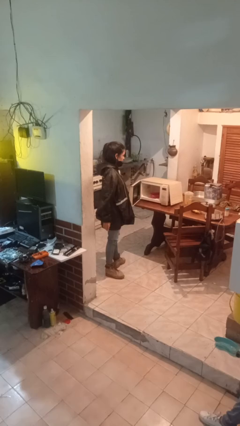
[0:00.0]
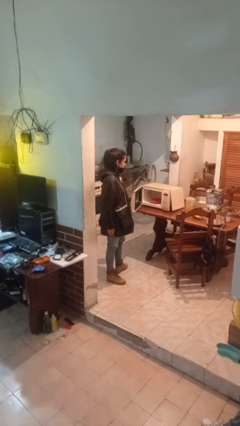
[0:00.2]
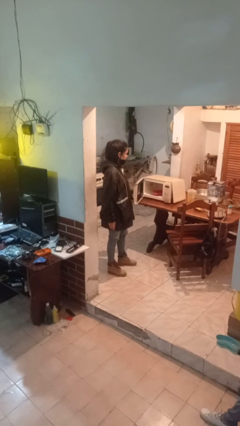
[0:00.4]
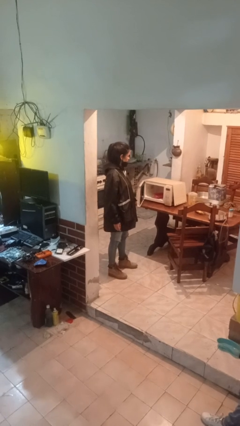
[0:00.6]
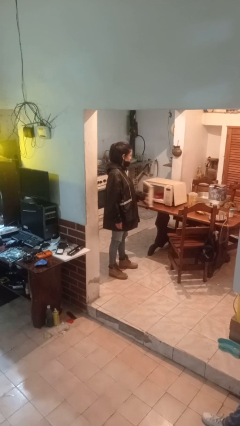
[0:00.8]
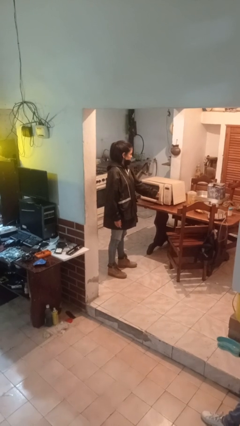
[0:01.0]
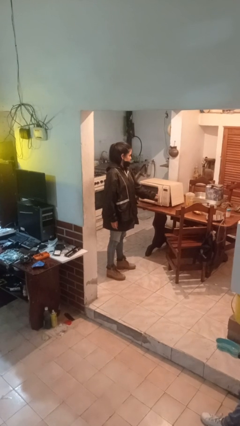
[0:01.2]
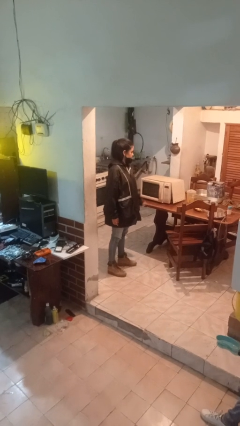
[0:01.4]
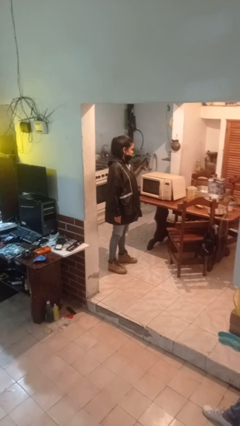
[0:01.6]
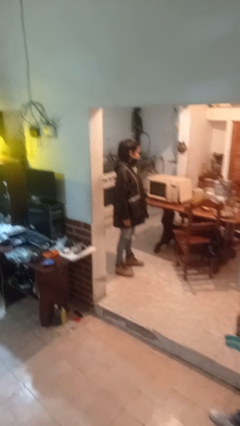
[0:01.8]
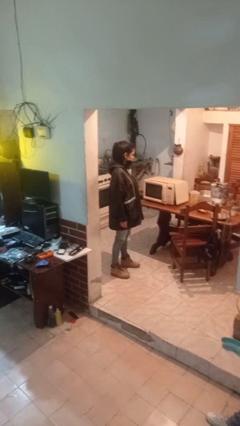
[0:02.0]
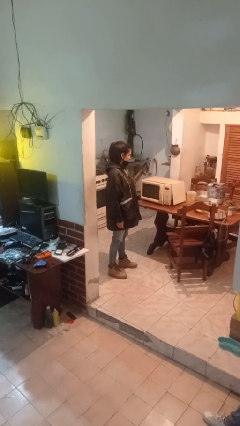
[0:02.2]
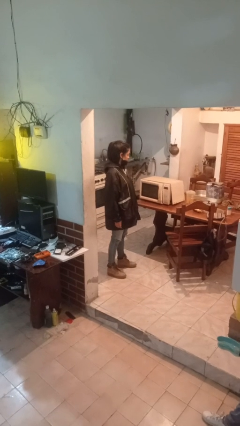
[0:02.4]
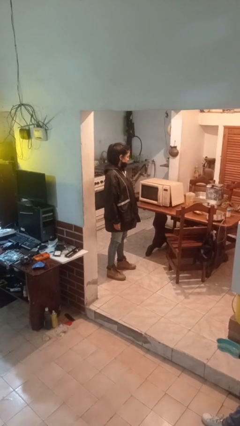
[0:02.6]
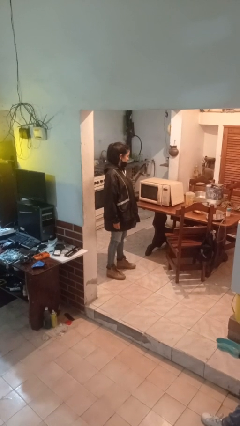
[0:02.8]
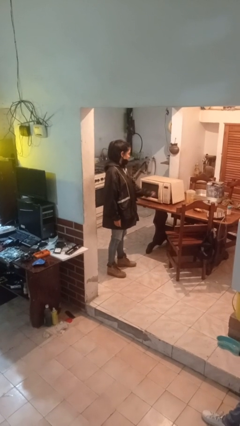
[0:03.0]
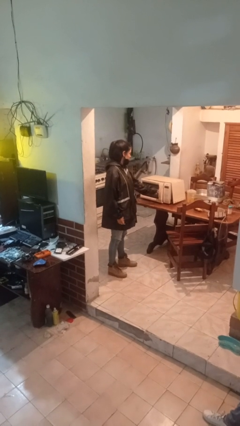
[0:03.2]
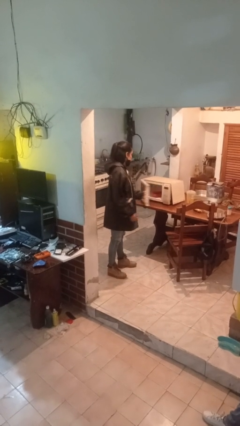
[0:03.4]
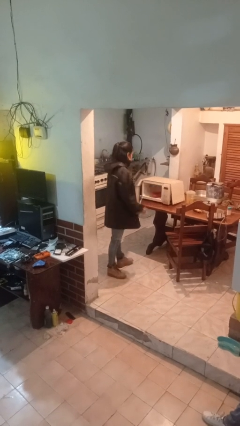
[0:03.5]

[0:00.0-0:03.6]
person dries dish

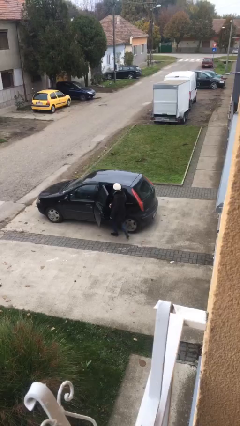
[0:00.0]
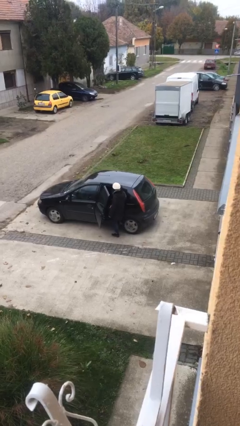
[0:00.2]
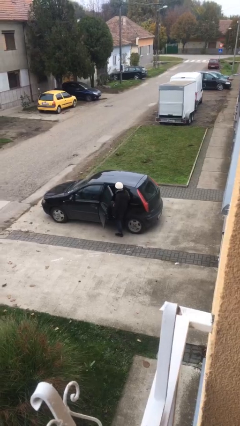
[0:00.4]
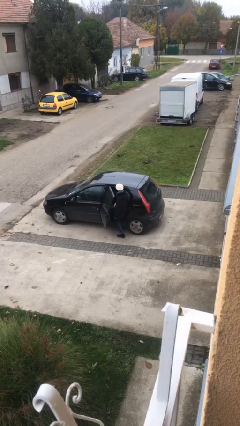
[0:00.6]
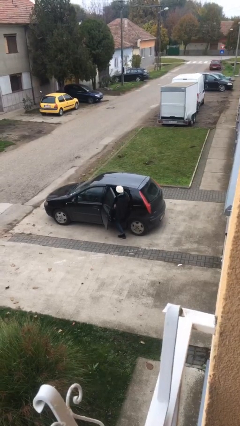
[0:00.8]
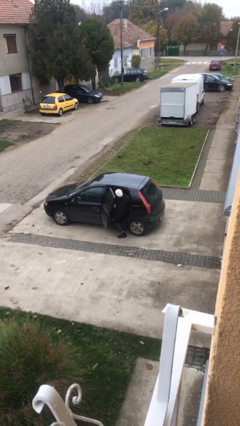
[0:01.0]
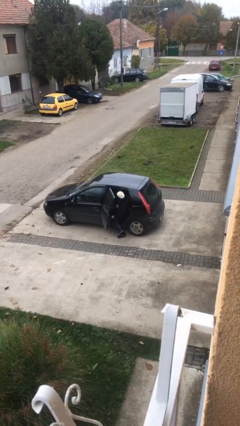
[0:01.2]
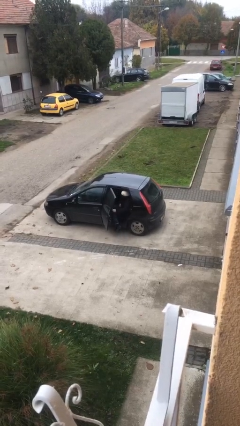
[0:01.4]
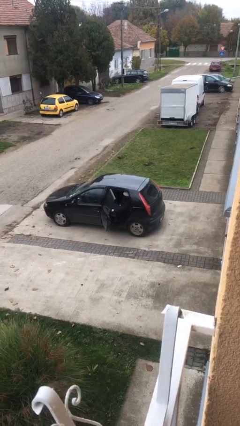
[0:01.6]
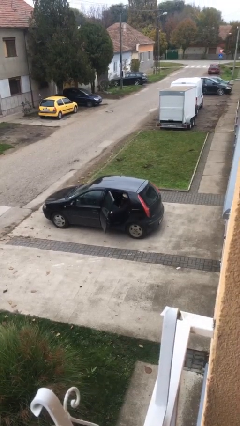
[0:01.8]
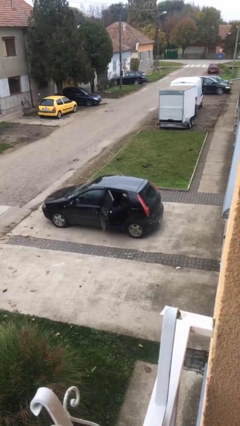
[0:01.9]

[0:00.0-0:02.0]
person enters car

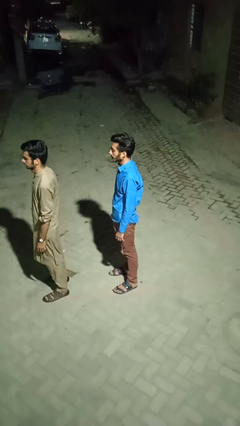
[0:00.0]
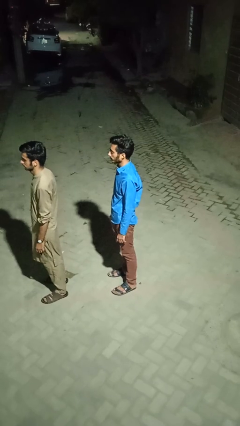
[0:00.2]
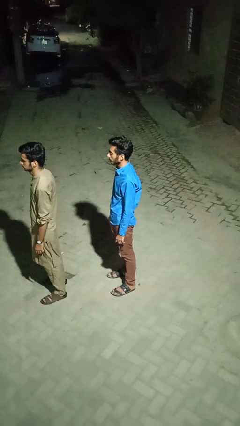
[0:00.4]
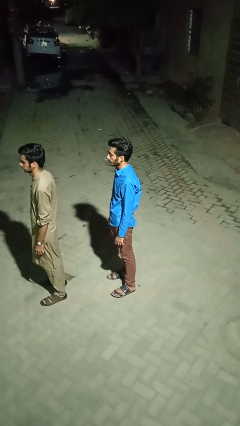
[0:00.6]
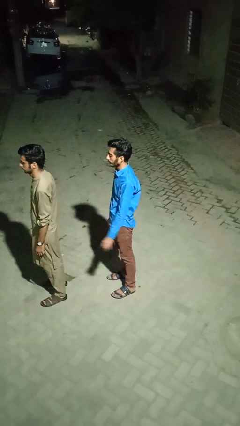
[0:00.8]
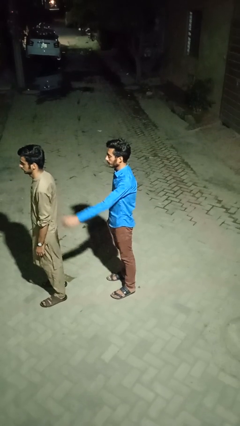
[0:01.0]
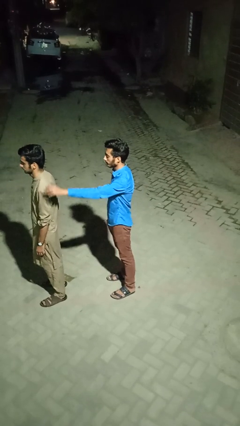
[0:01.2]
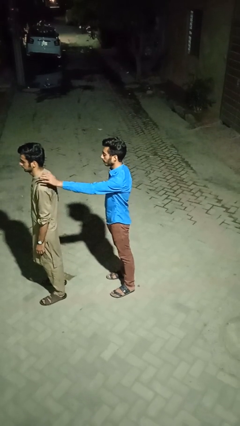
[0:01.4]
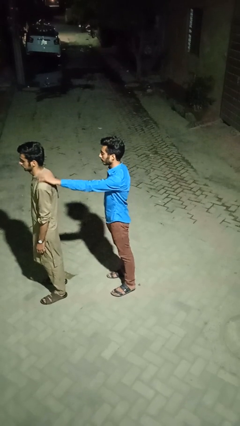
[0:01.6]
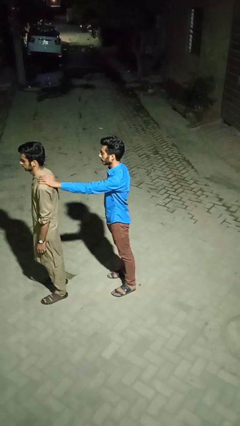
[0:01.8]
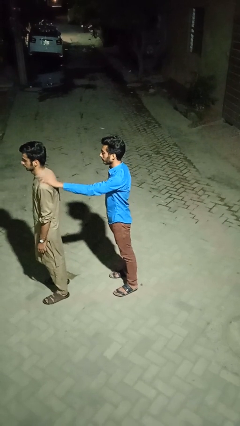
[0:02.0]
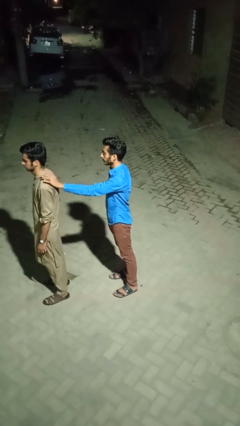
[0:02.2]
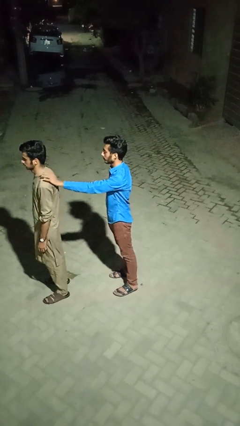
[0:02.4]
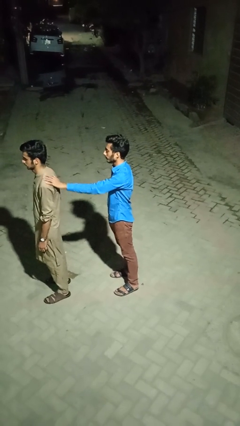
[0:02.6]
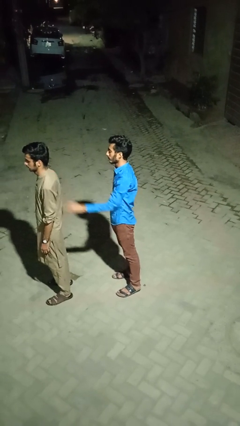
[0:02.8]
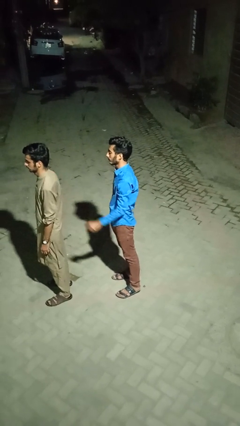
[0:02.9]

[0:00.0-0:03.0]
person touches back of person

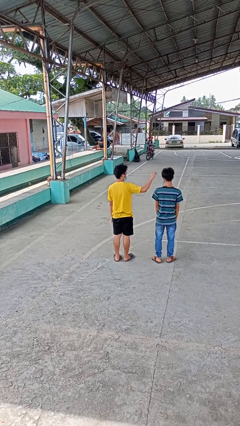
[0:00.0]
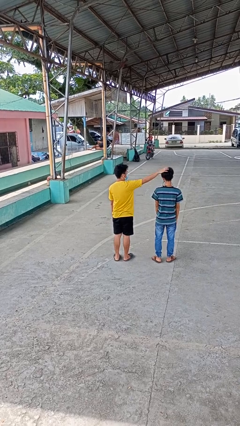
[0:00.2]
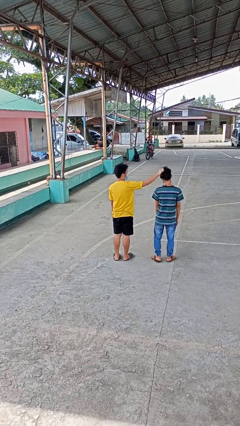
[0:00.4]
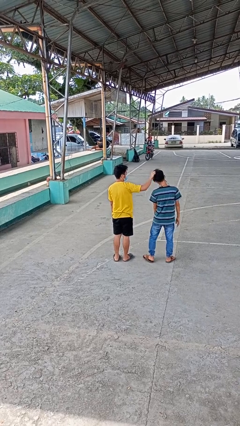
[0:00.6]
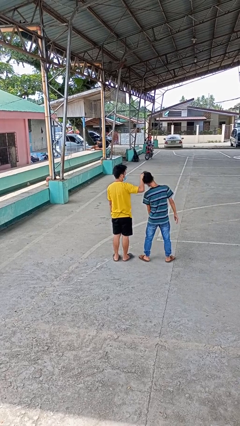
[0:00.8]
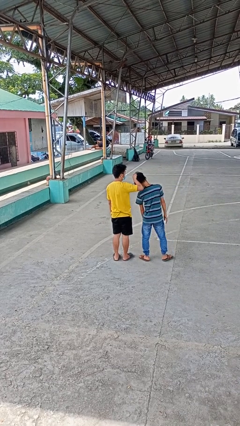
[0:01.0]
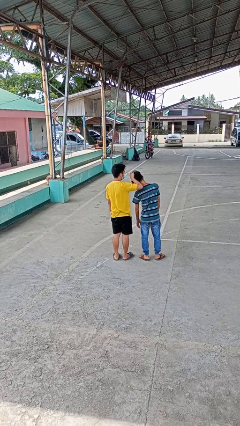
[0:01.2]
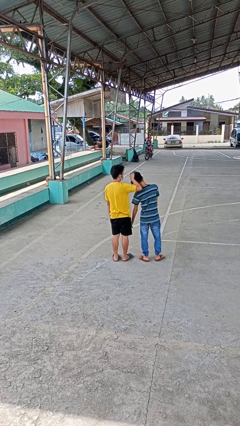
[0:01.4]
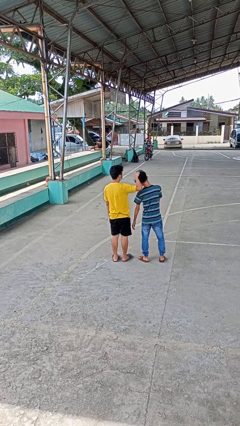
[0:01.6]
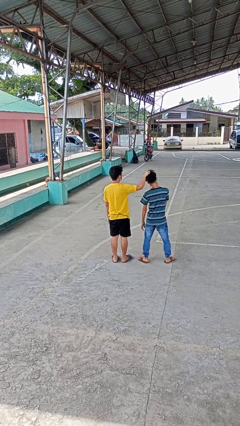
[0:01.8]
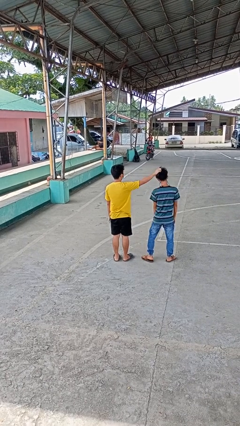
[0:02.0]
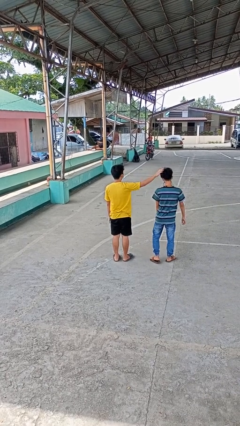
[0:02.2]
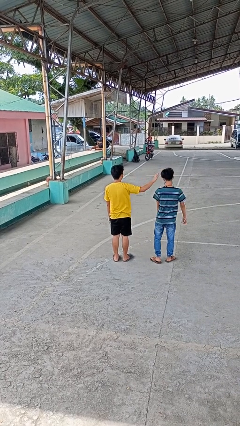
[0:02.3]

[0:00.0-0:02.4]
person grabs person by hair

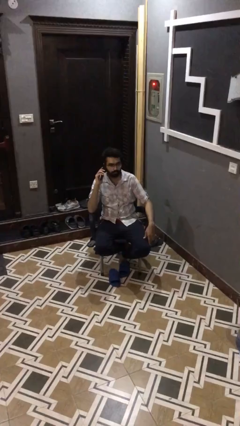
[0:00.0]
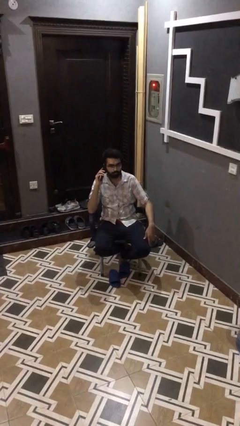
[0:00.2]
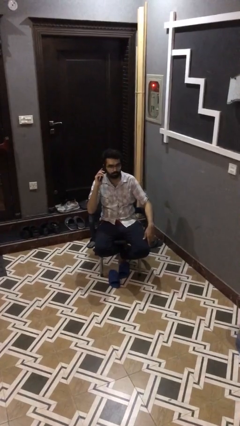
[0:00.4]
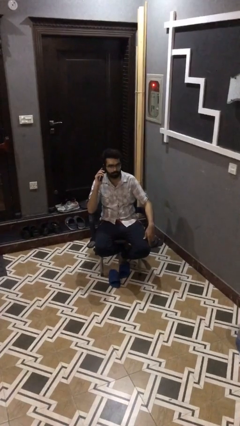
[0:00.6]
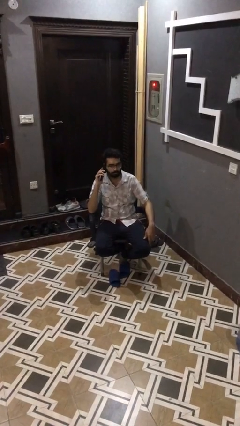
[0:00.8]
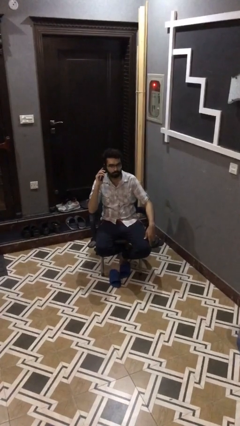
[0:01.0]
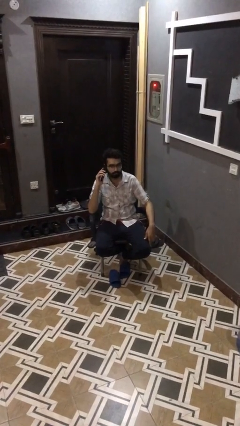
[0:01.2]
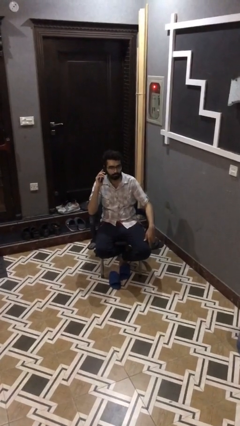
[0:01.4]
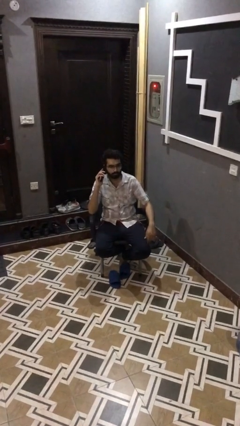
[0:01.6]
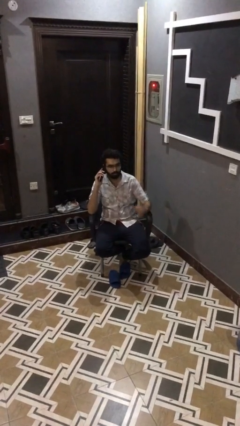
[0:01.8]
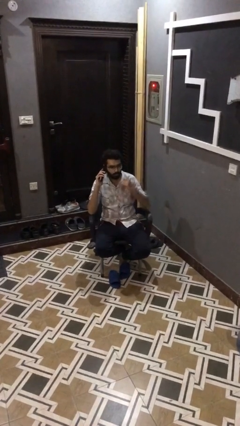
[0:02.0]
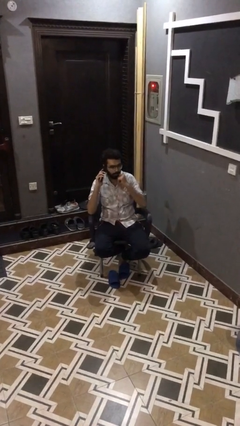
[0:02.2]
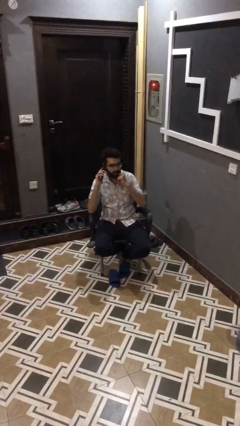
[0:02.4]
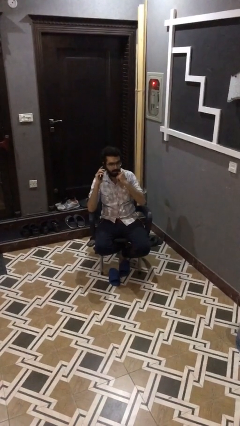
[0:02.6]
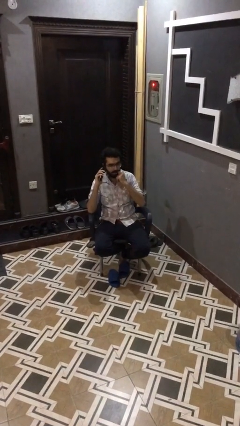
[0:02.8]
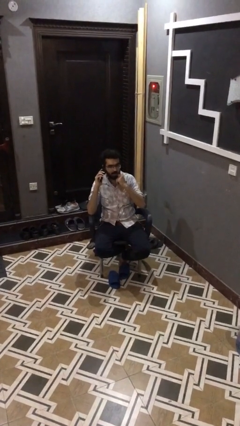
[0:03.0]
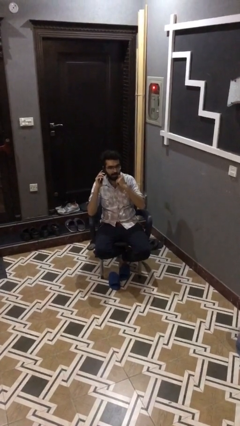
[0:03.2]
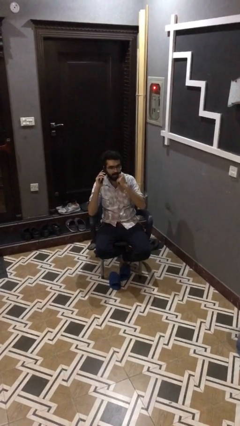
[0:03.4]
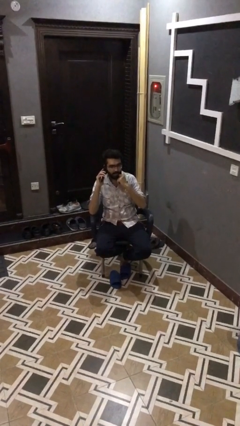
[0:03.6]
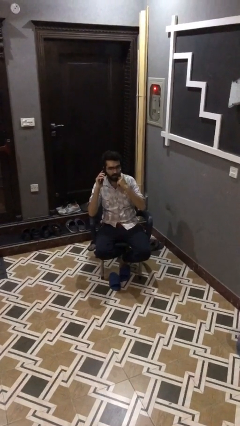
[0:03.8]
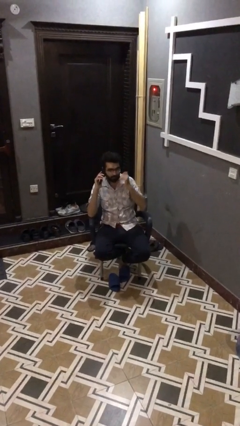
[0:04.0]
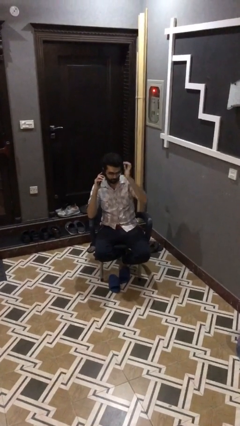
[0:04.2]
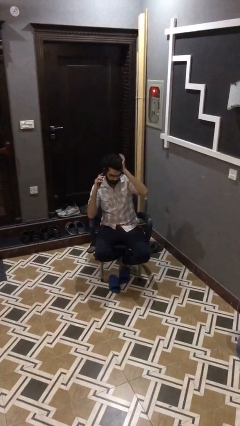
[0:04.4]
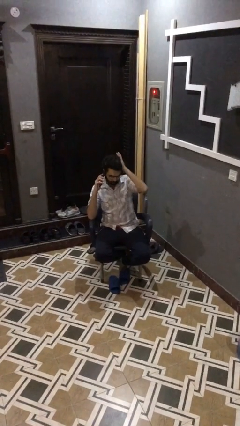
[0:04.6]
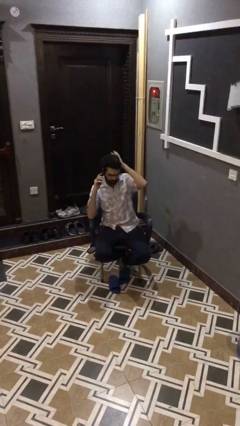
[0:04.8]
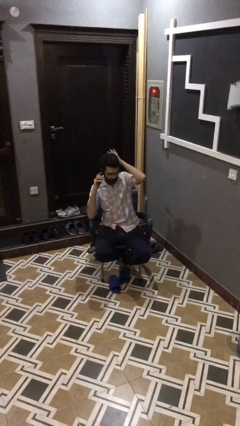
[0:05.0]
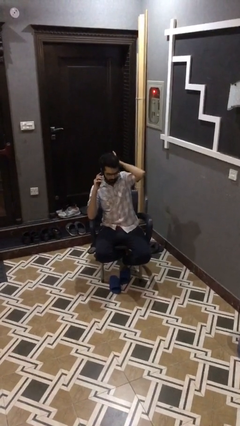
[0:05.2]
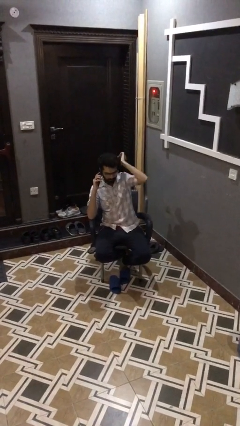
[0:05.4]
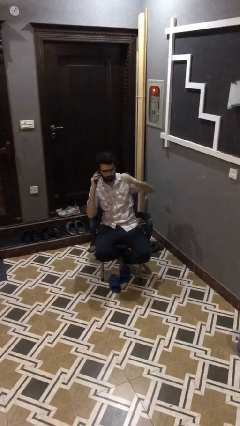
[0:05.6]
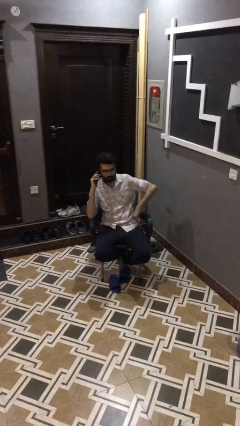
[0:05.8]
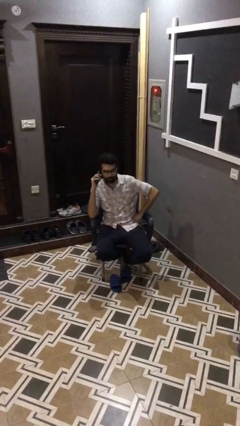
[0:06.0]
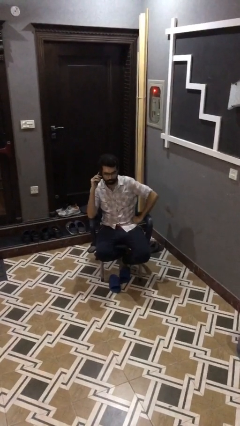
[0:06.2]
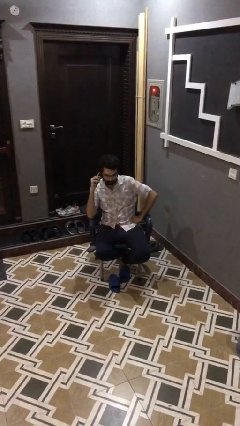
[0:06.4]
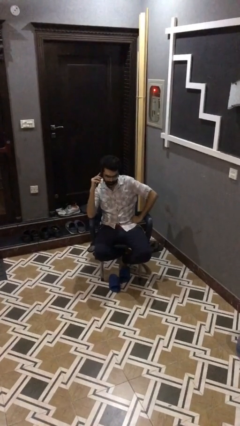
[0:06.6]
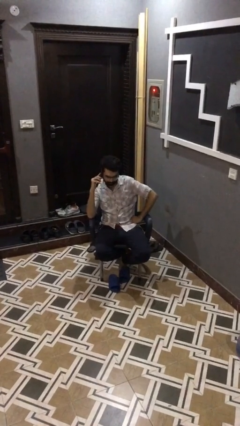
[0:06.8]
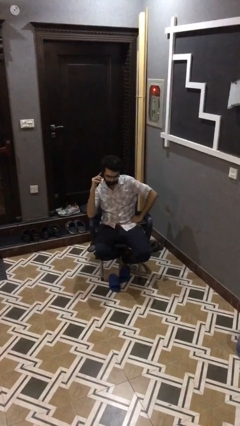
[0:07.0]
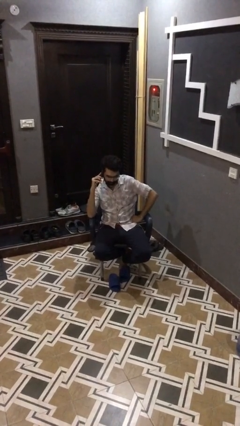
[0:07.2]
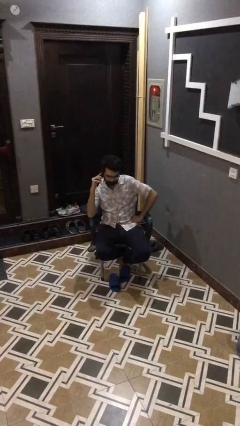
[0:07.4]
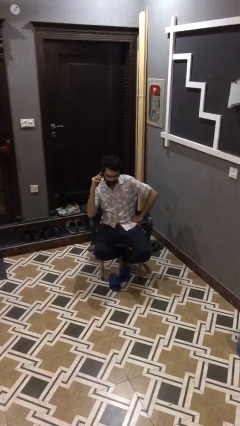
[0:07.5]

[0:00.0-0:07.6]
person talks on phone
